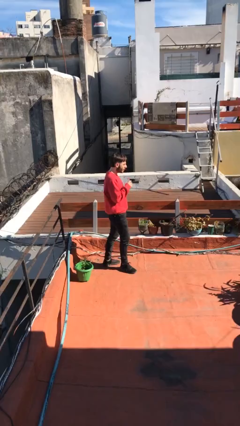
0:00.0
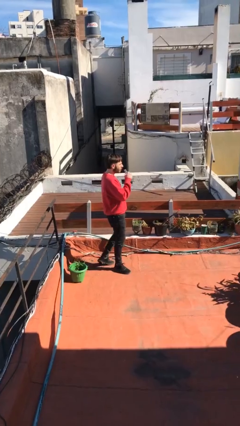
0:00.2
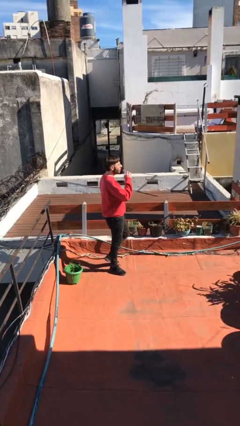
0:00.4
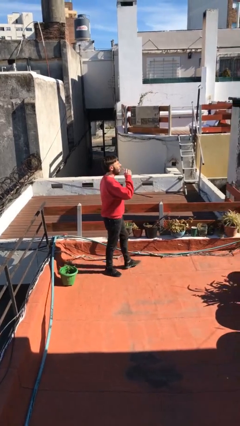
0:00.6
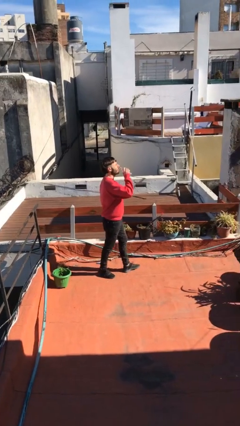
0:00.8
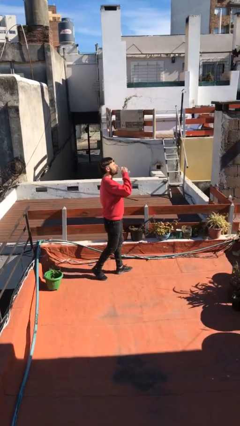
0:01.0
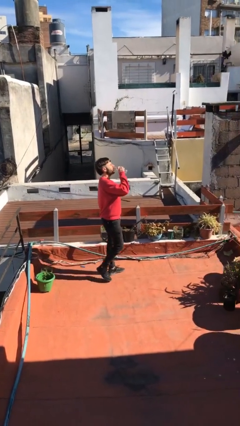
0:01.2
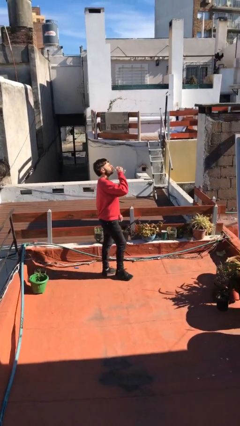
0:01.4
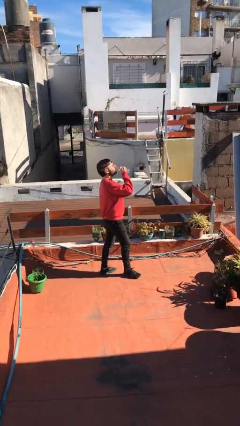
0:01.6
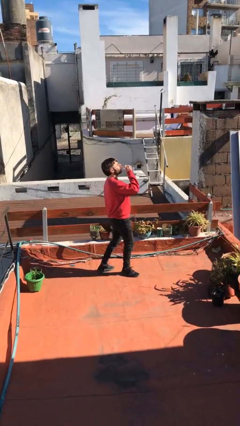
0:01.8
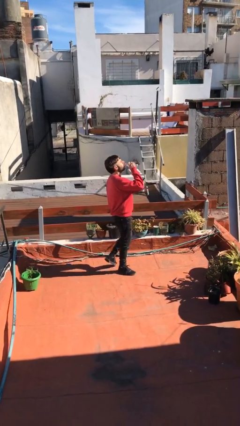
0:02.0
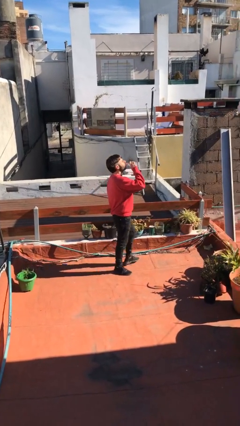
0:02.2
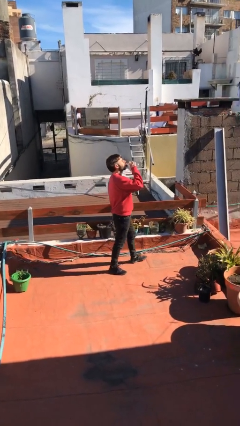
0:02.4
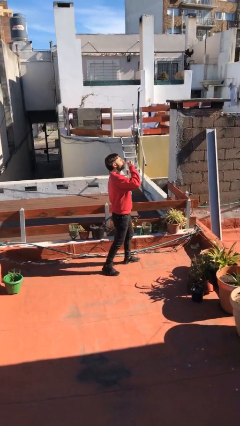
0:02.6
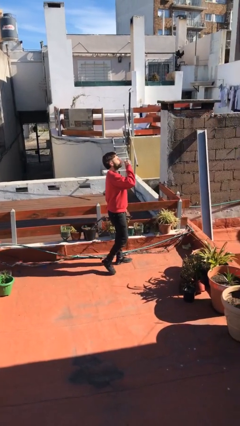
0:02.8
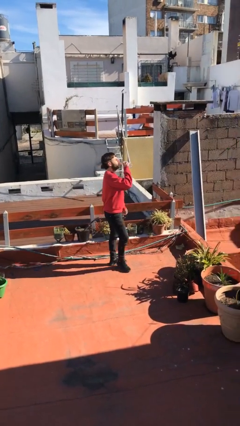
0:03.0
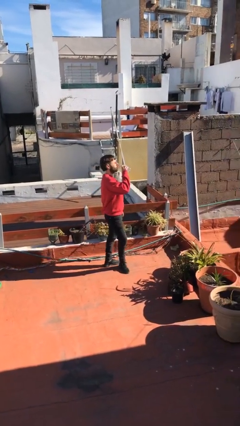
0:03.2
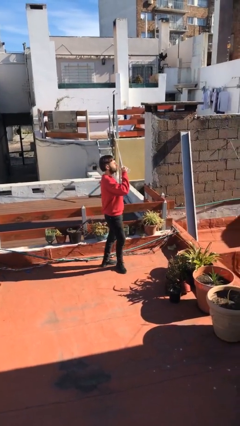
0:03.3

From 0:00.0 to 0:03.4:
person drinks from bottle

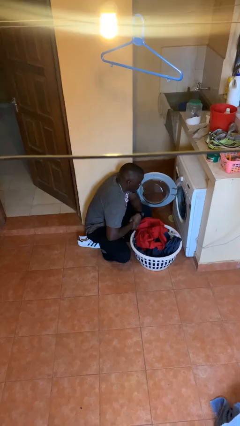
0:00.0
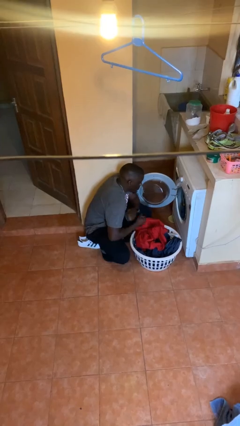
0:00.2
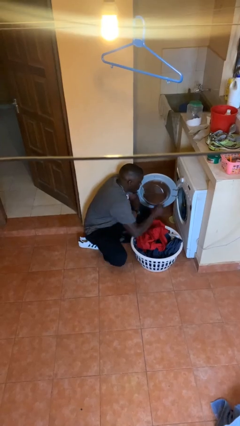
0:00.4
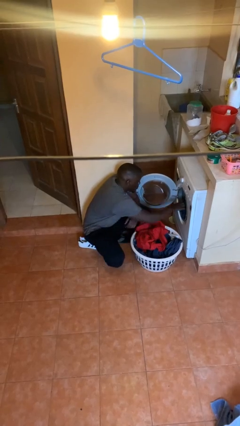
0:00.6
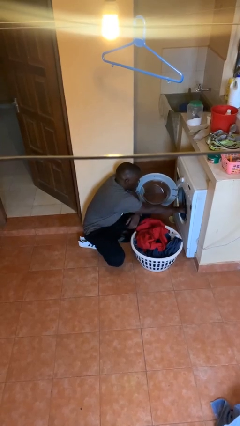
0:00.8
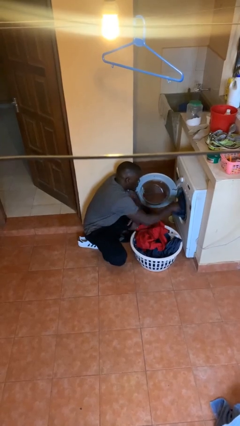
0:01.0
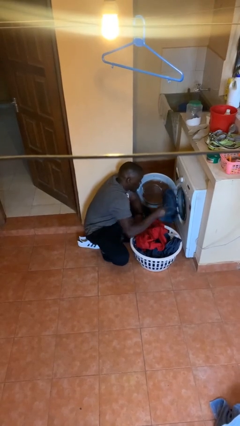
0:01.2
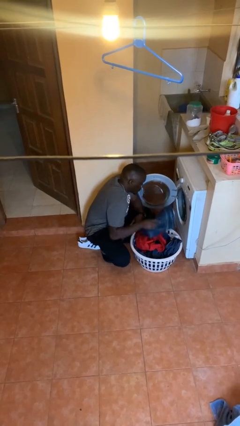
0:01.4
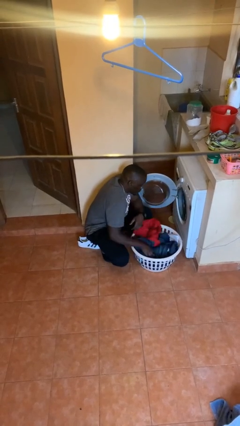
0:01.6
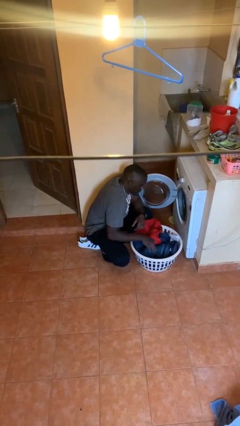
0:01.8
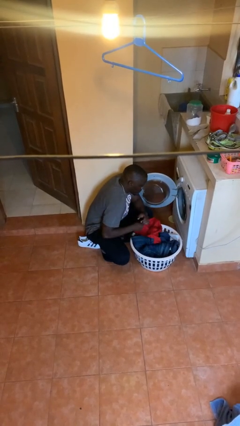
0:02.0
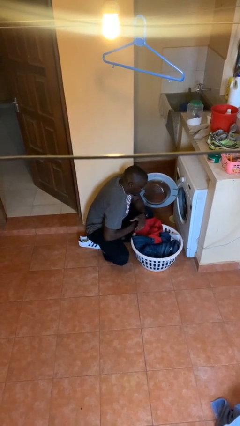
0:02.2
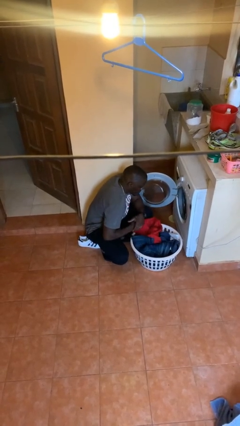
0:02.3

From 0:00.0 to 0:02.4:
person unloads dryer

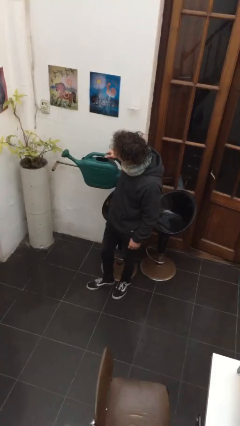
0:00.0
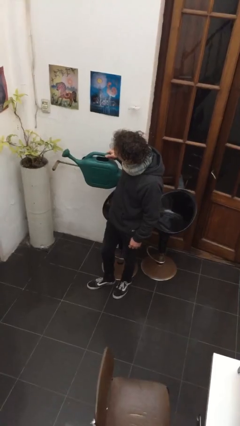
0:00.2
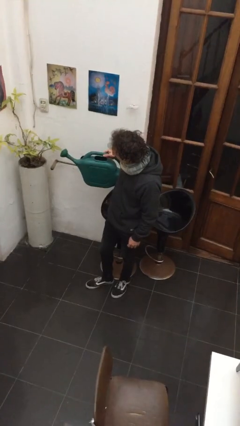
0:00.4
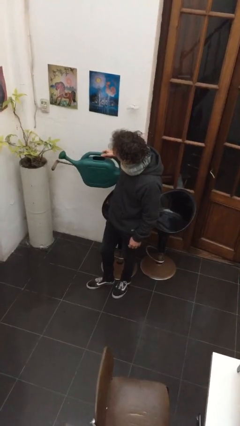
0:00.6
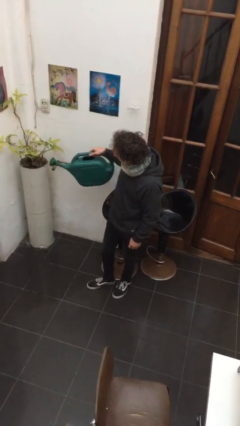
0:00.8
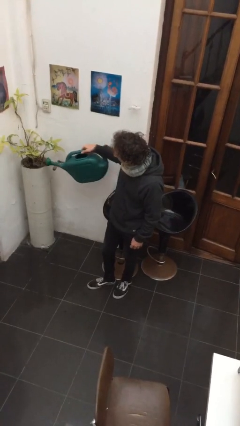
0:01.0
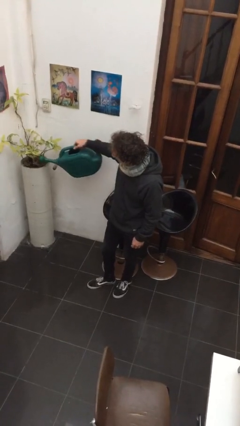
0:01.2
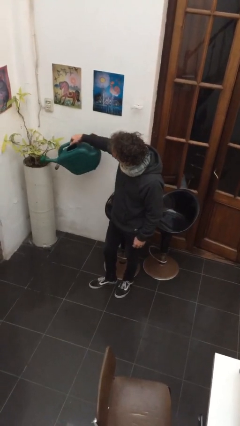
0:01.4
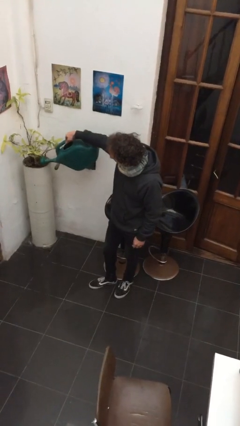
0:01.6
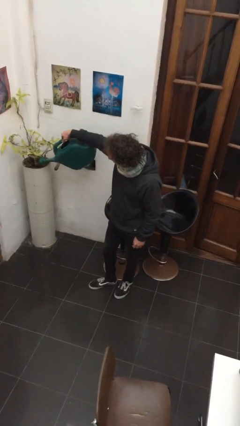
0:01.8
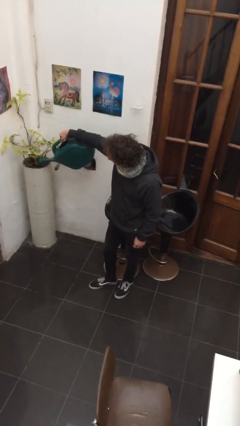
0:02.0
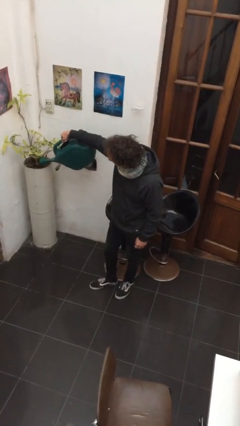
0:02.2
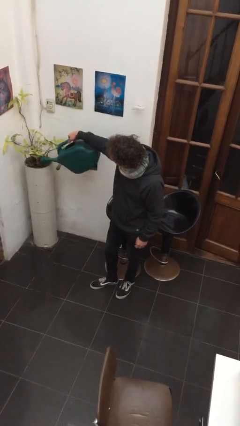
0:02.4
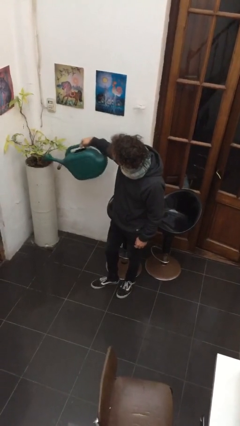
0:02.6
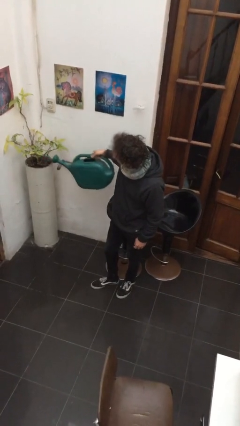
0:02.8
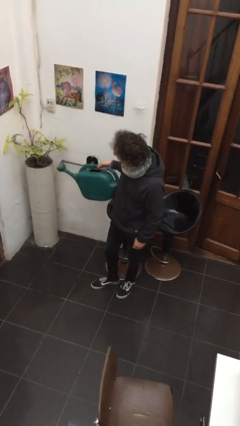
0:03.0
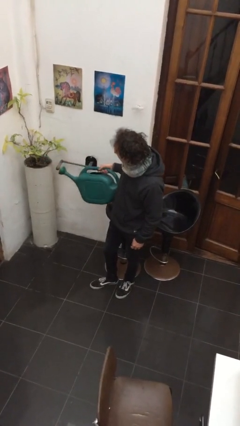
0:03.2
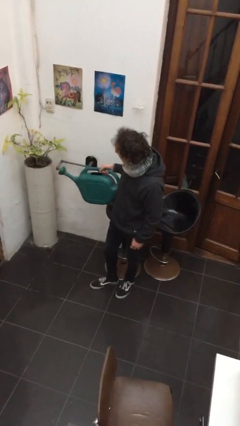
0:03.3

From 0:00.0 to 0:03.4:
person waters houseplant

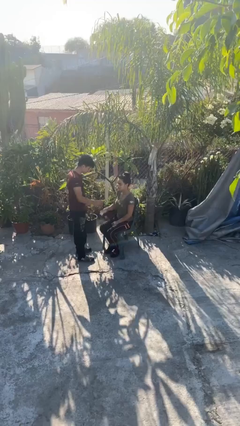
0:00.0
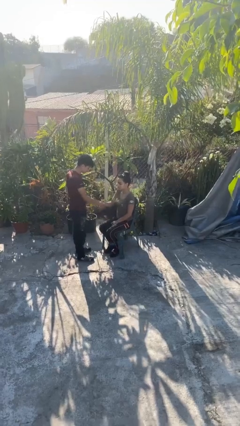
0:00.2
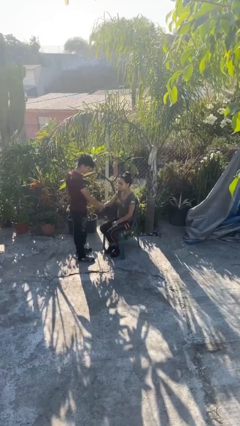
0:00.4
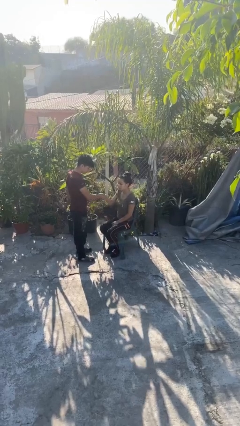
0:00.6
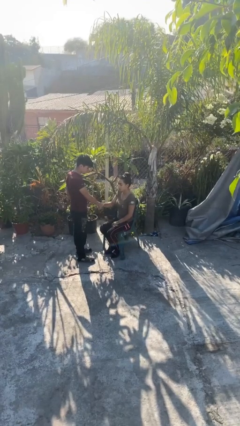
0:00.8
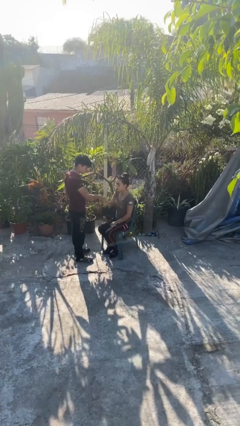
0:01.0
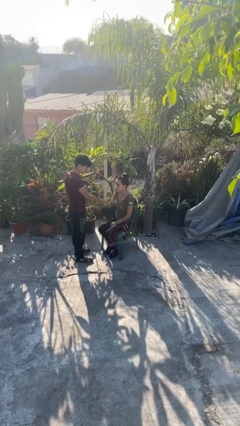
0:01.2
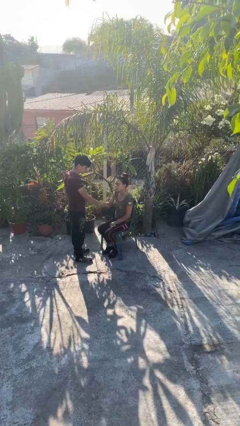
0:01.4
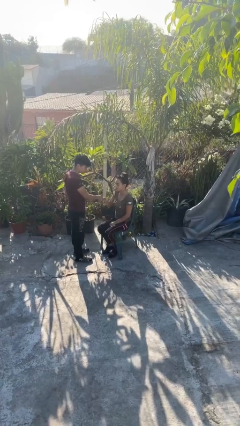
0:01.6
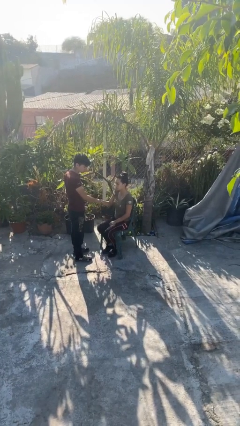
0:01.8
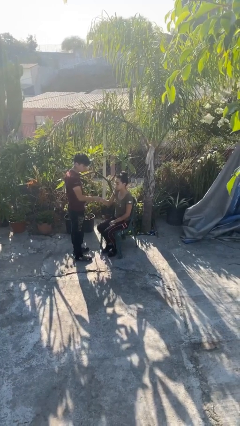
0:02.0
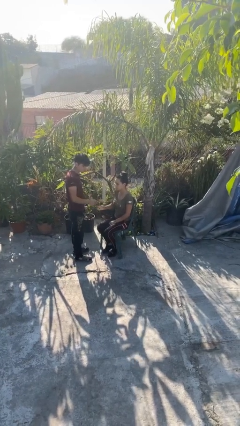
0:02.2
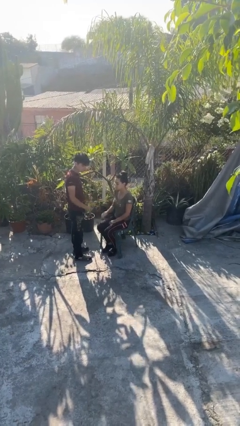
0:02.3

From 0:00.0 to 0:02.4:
person shakes hand

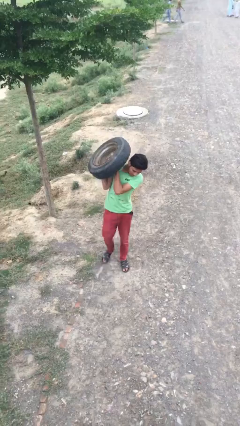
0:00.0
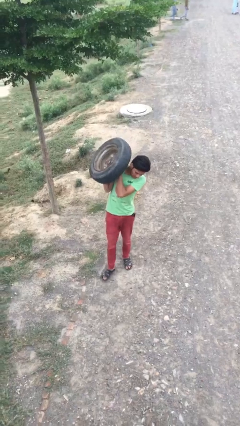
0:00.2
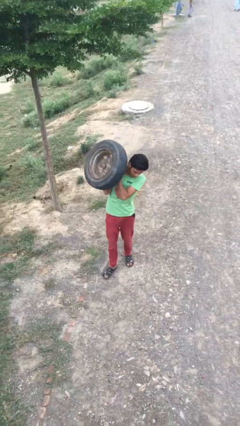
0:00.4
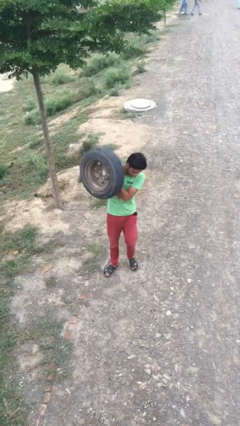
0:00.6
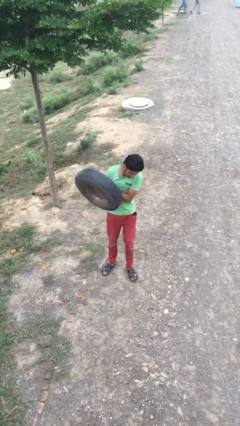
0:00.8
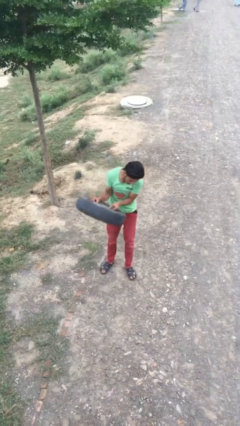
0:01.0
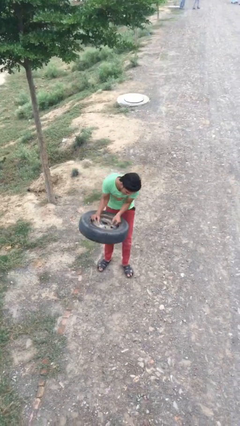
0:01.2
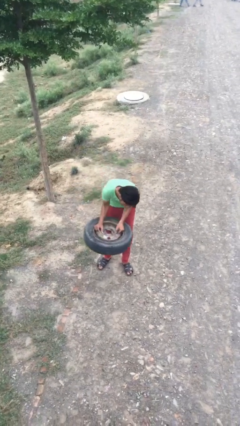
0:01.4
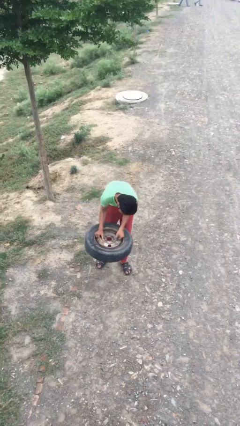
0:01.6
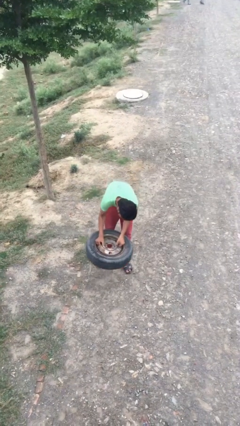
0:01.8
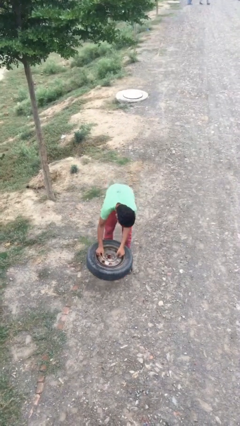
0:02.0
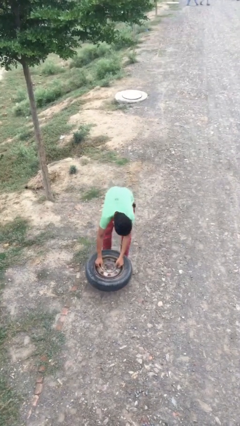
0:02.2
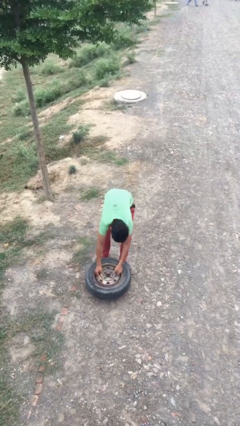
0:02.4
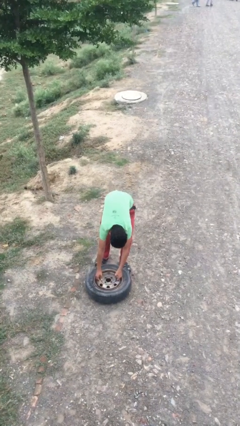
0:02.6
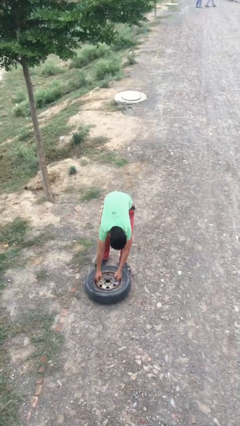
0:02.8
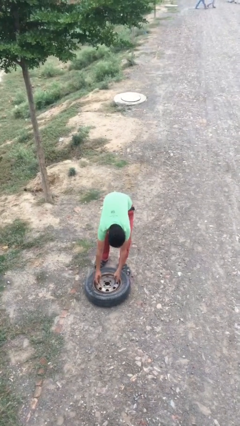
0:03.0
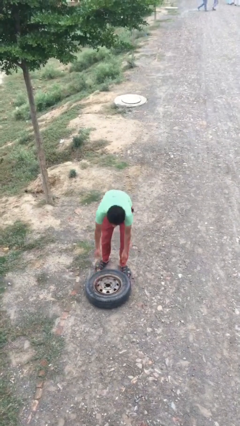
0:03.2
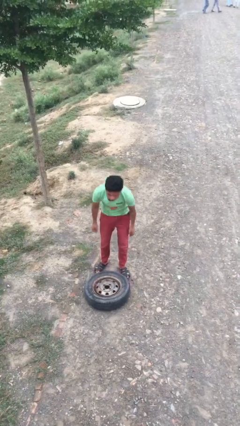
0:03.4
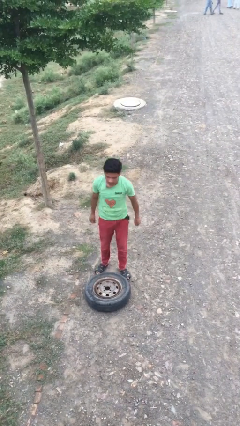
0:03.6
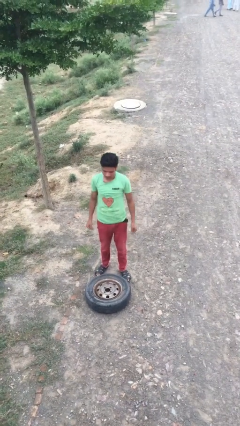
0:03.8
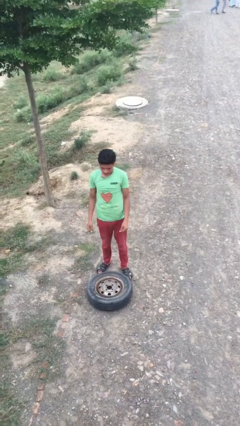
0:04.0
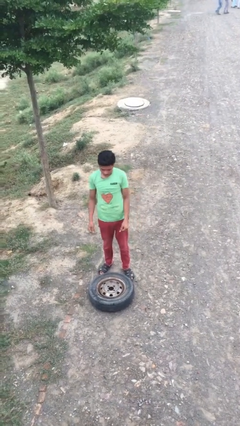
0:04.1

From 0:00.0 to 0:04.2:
person puts down object on floor

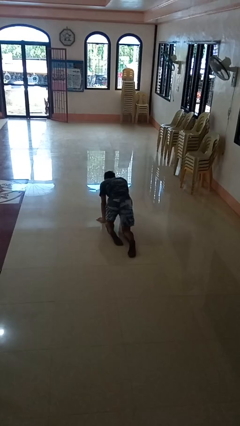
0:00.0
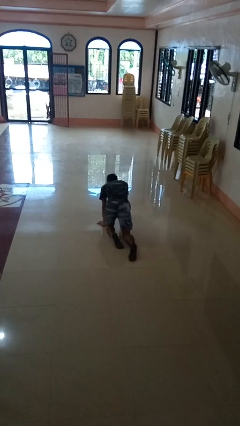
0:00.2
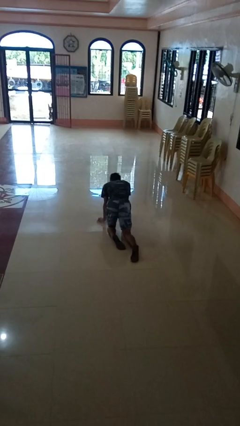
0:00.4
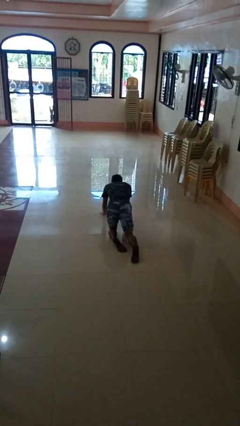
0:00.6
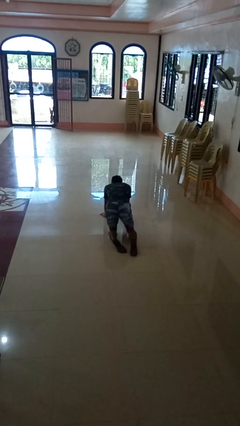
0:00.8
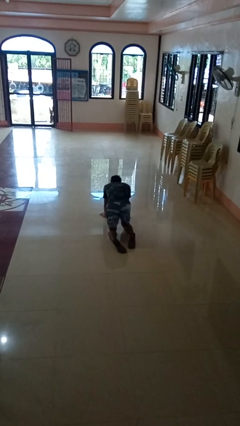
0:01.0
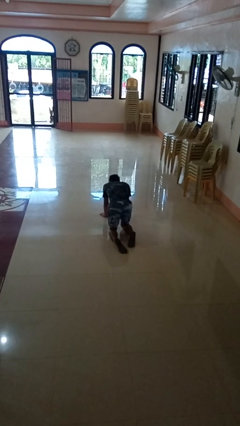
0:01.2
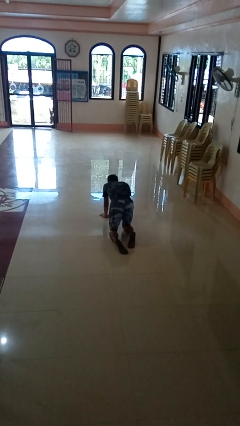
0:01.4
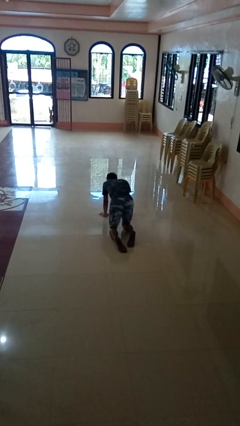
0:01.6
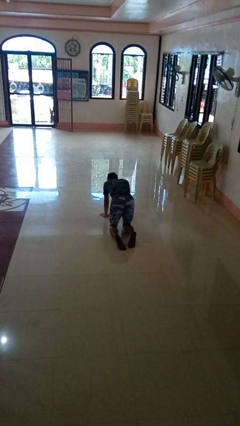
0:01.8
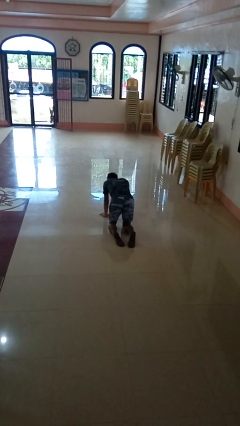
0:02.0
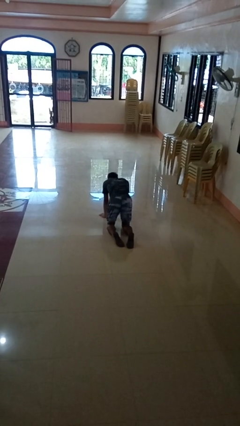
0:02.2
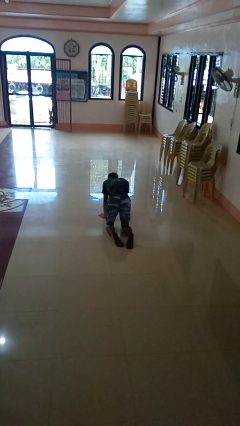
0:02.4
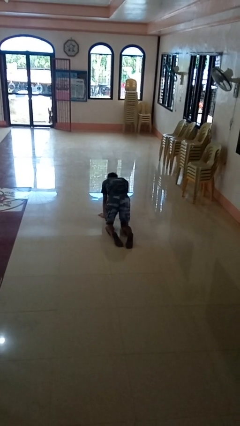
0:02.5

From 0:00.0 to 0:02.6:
person crawls
